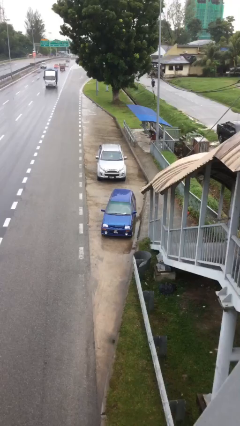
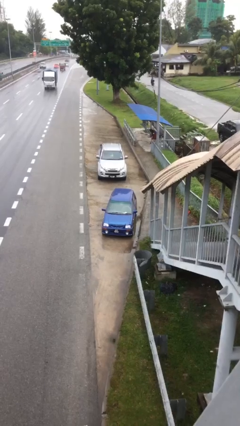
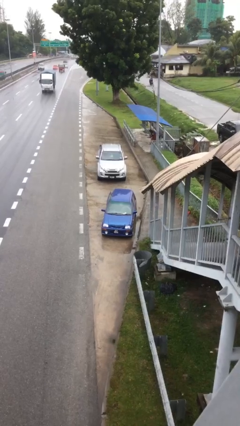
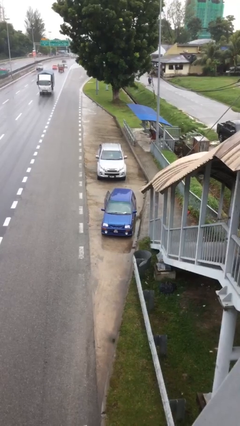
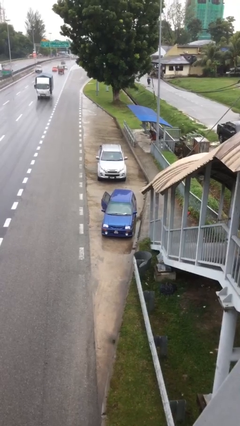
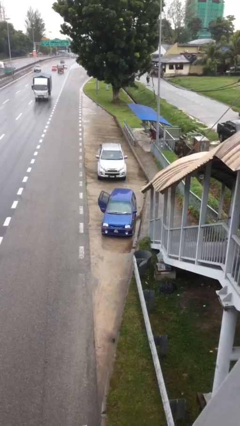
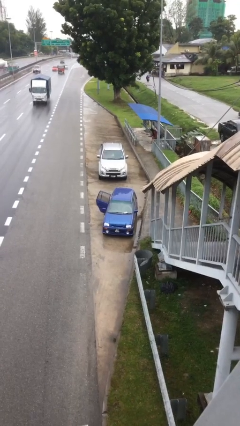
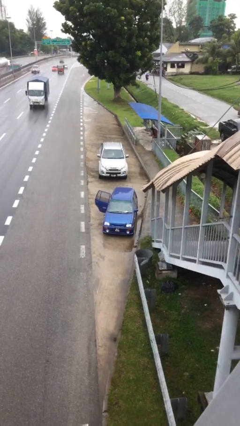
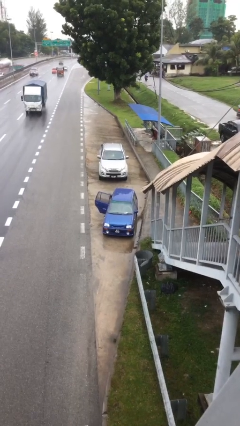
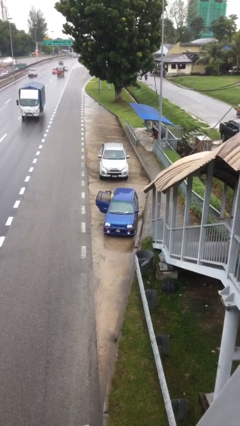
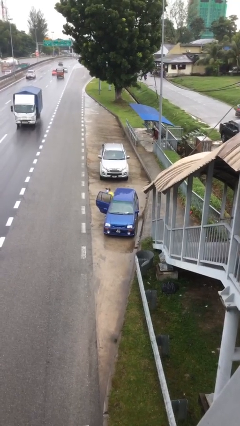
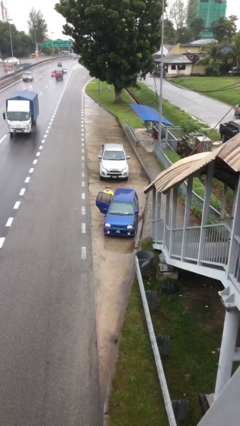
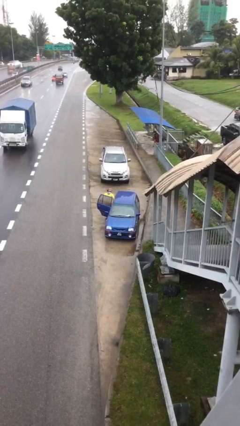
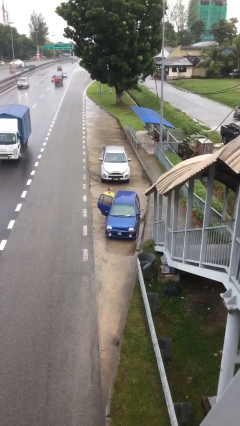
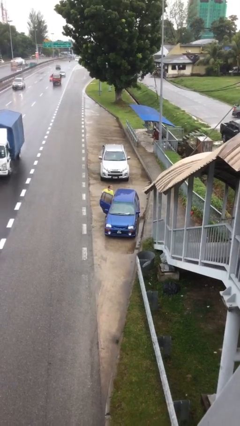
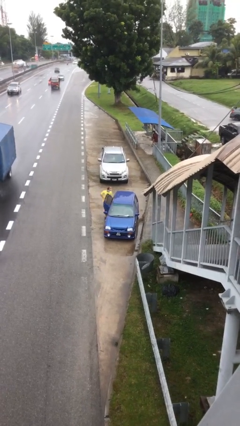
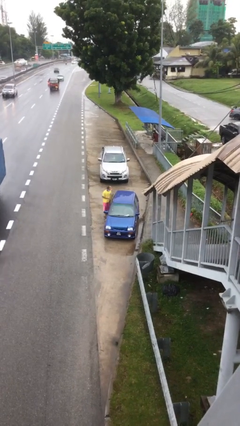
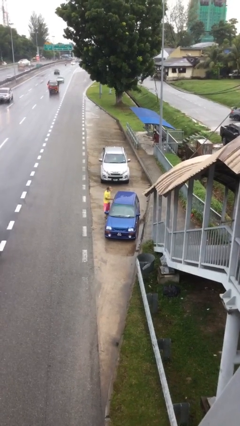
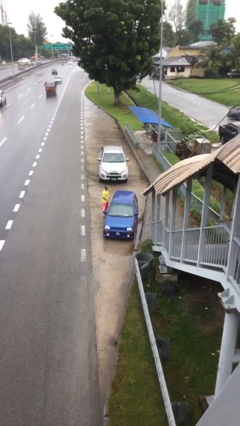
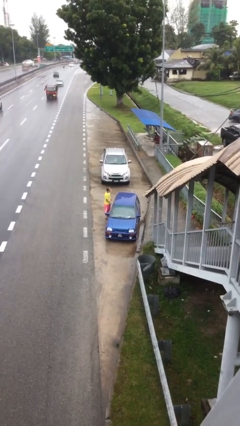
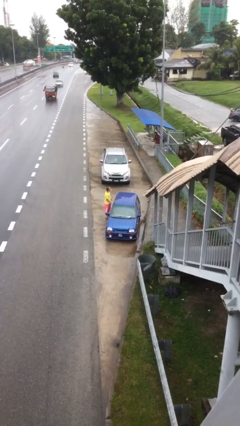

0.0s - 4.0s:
car drops off person

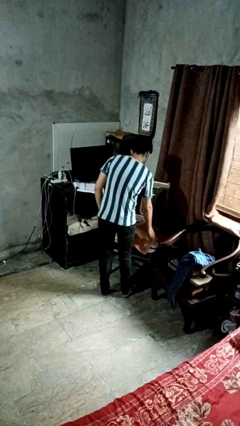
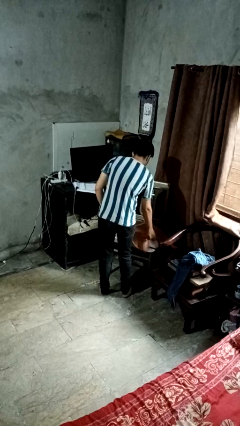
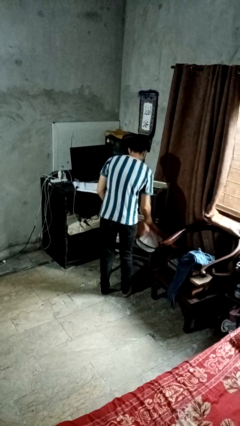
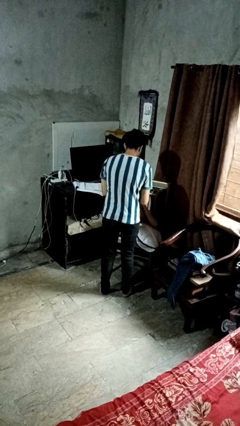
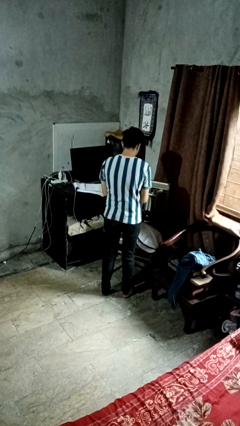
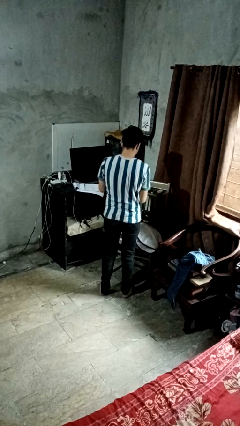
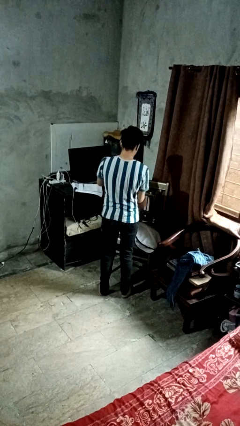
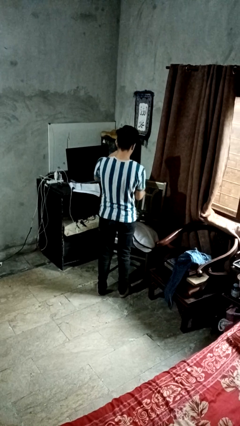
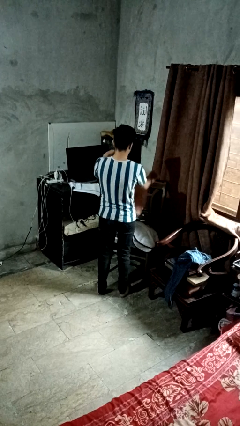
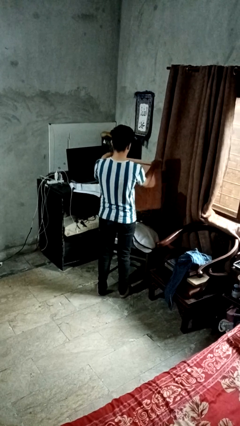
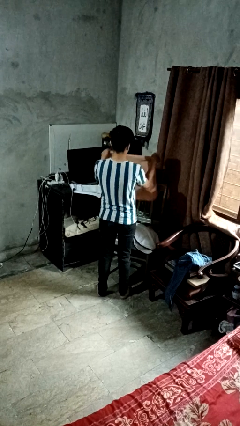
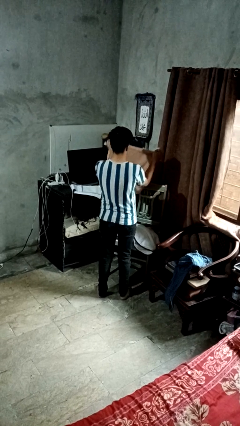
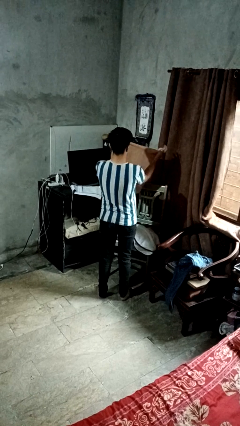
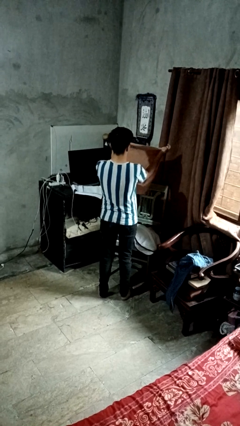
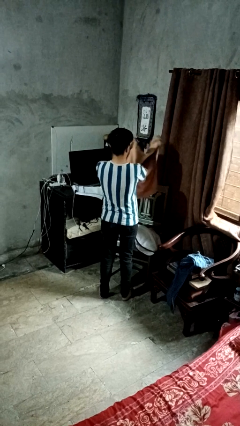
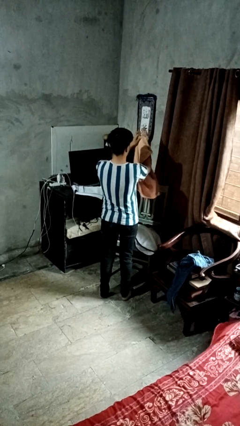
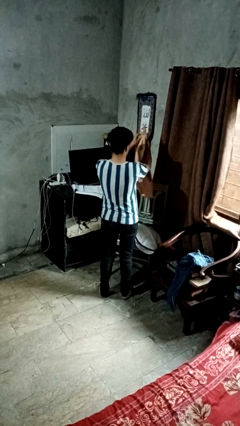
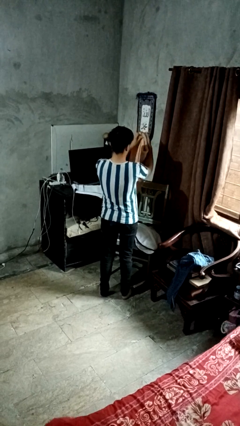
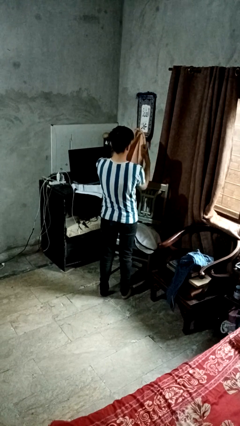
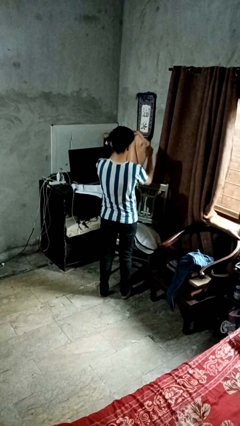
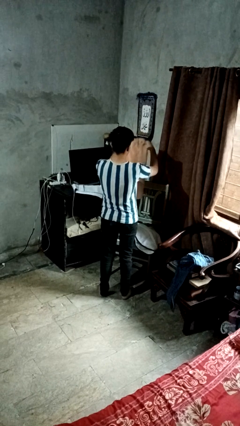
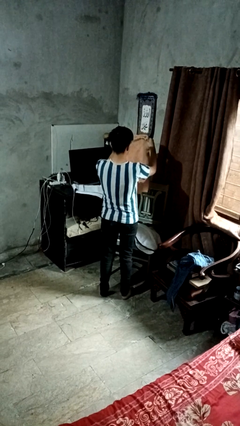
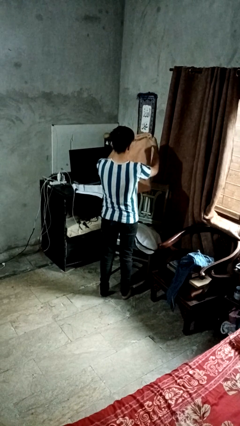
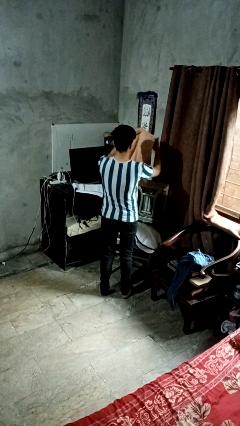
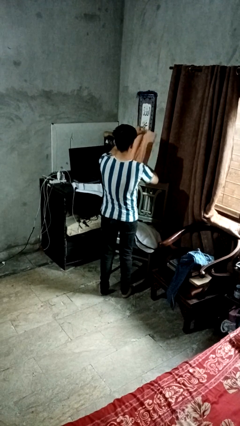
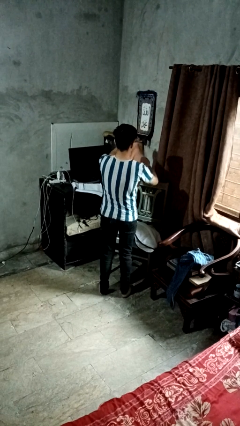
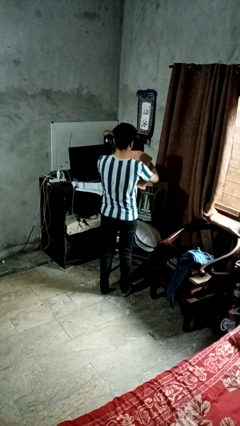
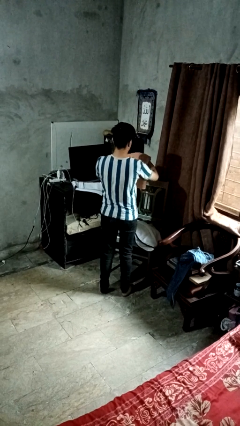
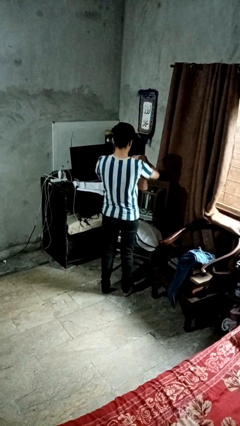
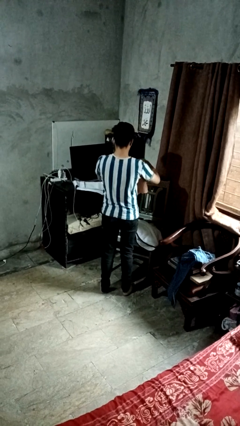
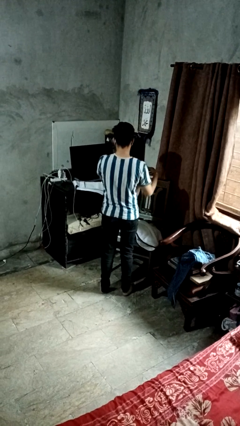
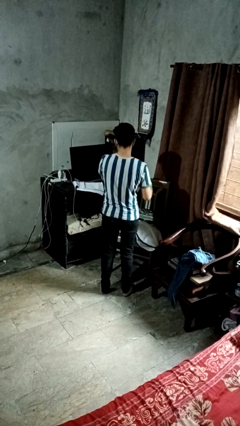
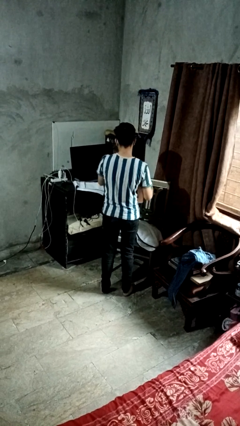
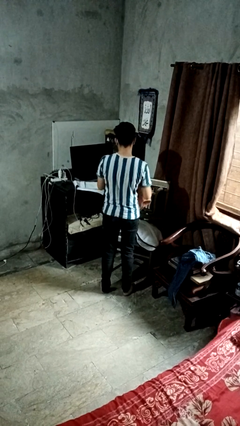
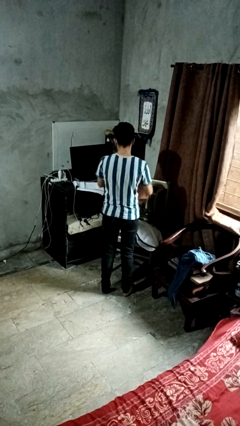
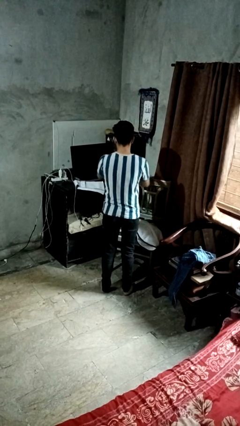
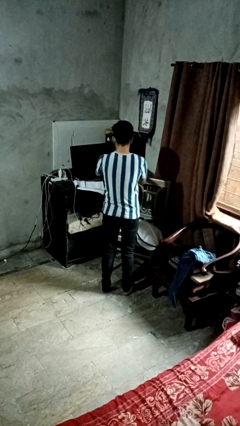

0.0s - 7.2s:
person folds towel

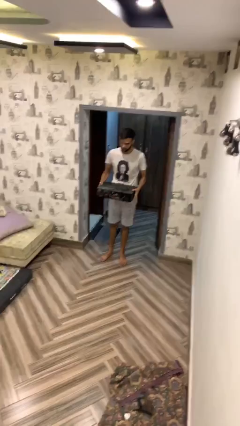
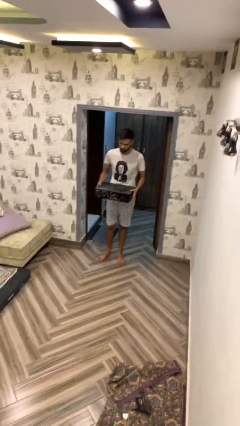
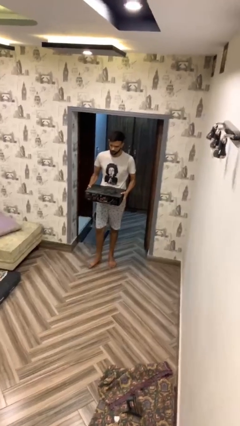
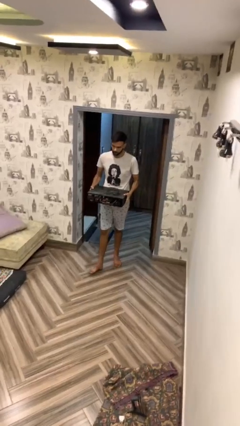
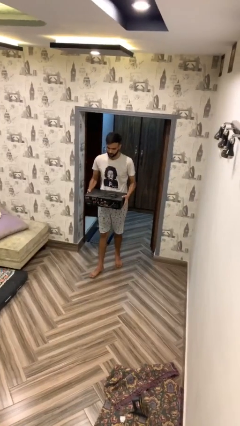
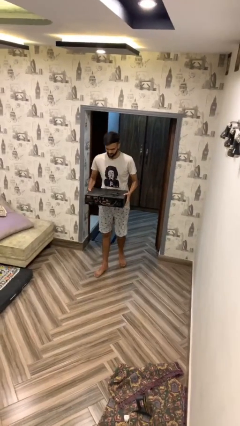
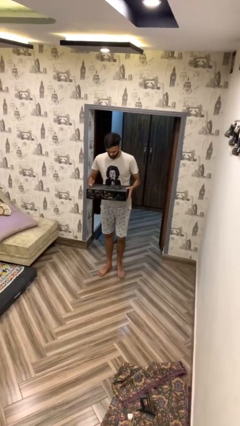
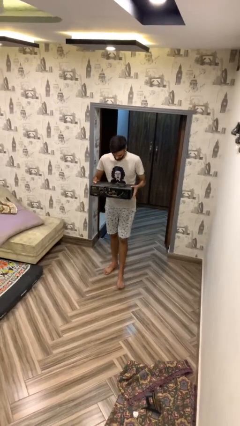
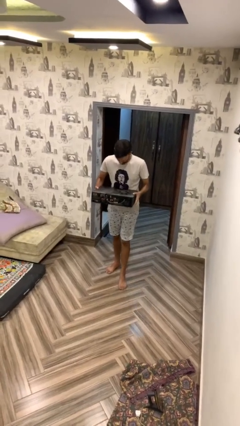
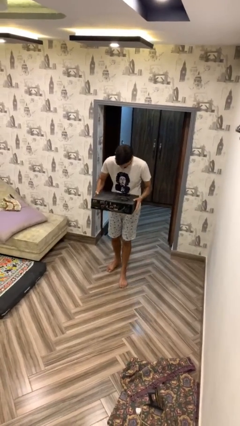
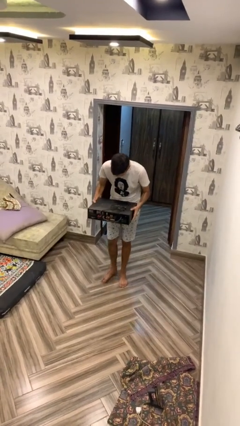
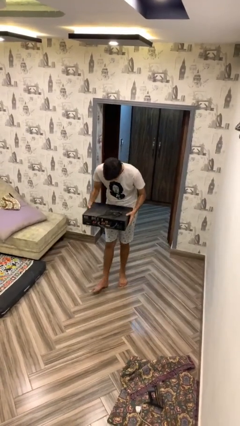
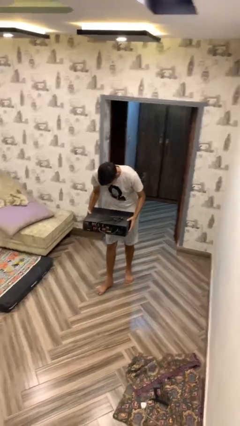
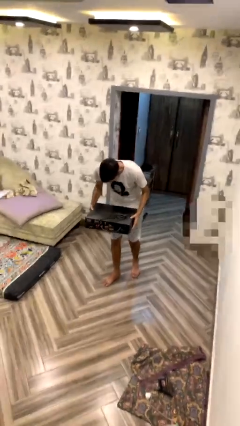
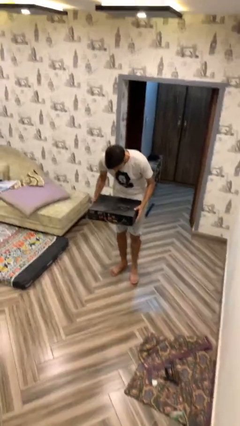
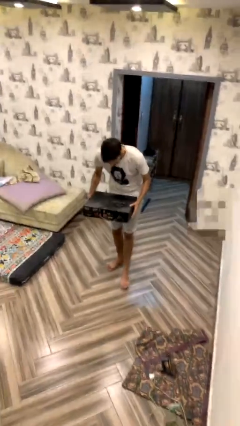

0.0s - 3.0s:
person carries heavy object

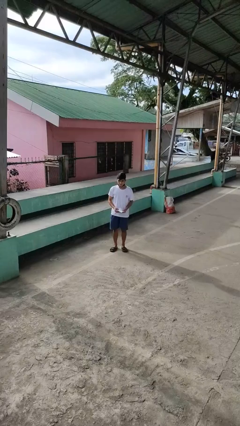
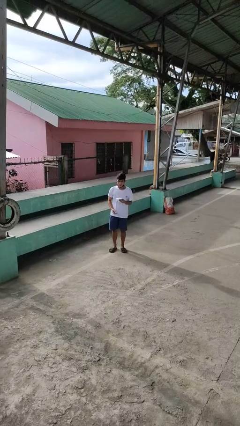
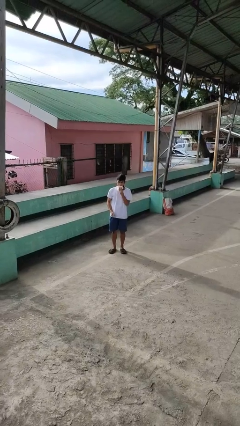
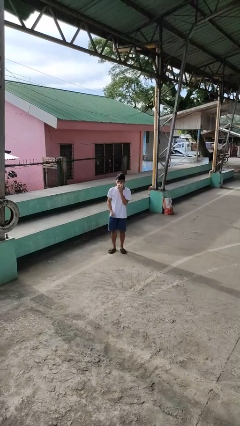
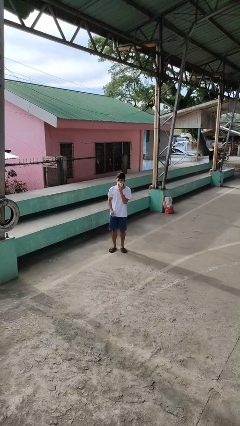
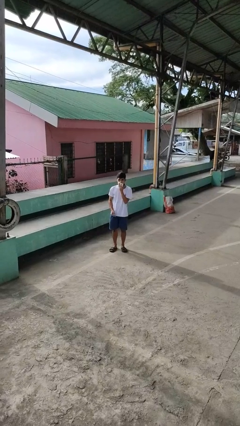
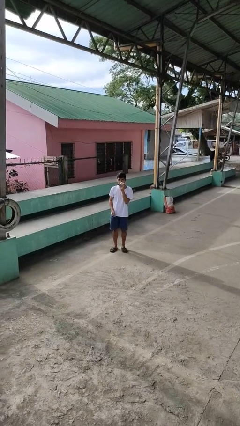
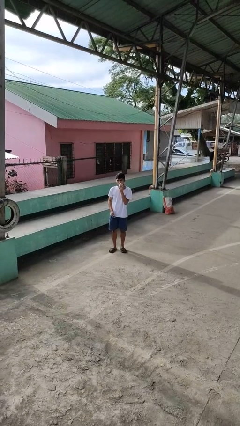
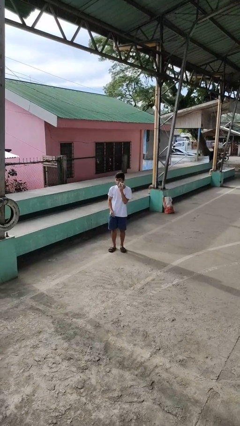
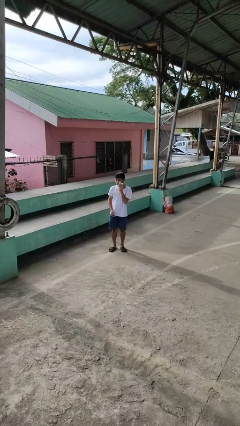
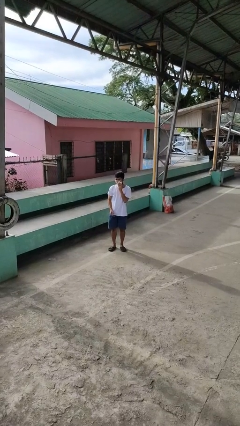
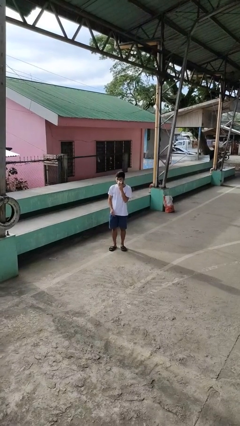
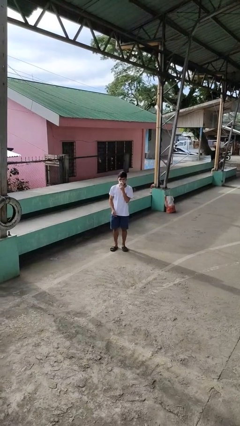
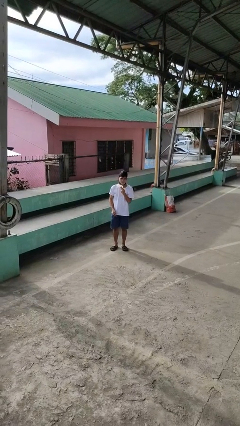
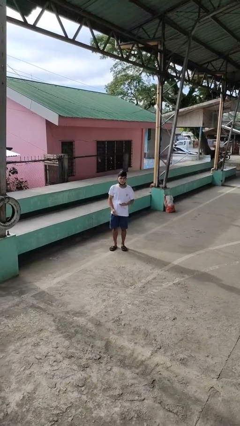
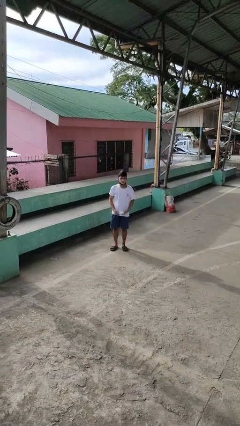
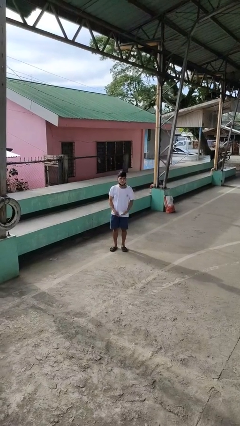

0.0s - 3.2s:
person wipes mouth with napkin

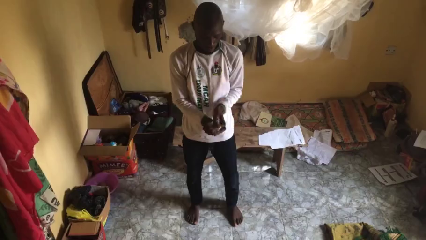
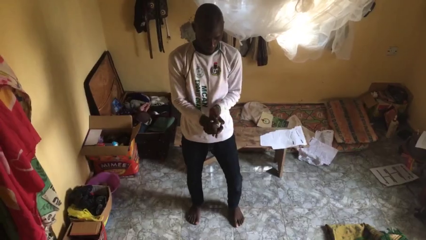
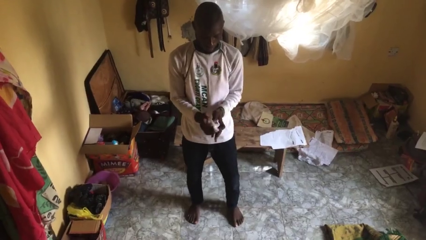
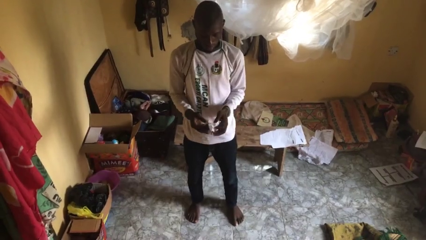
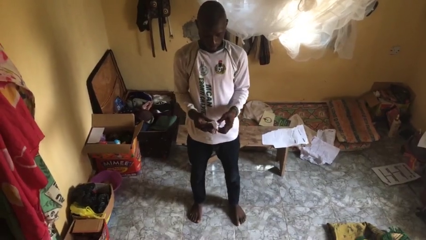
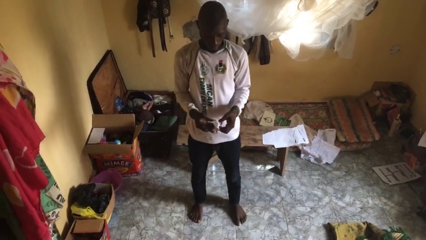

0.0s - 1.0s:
person crumples paper
